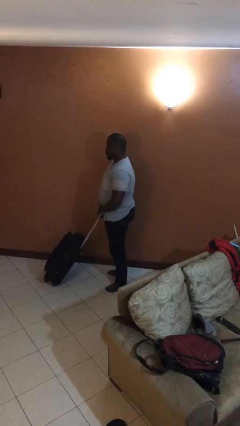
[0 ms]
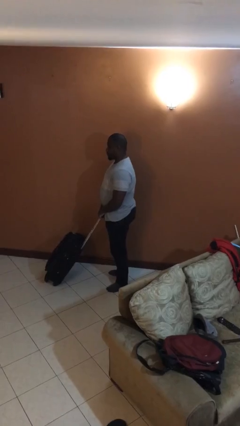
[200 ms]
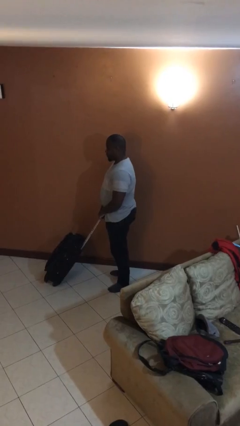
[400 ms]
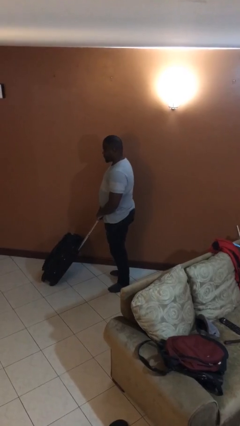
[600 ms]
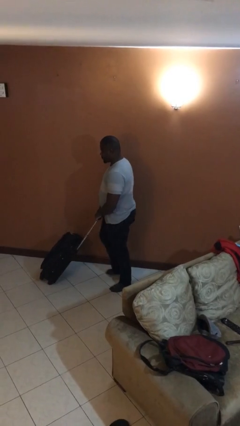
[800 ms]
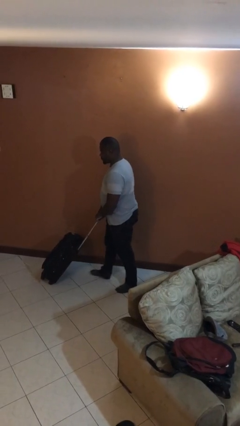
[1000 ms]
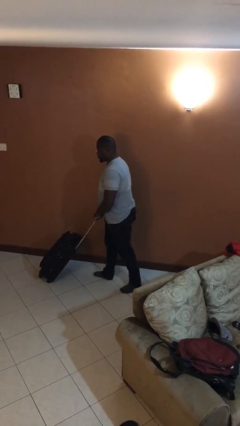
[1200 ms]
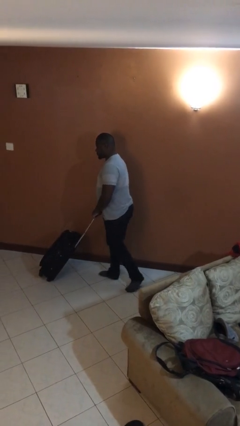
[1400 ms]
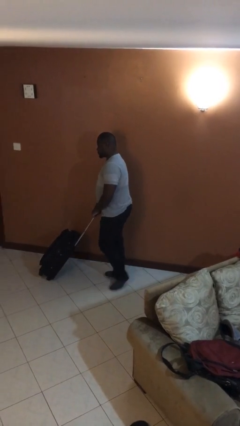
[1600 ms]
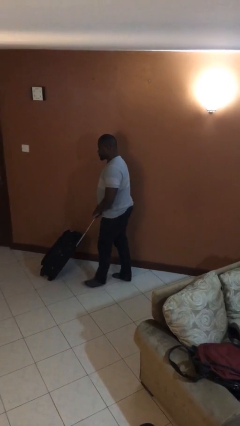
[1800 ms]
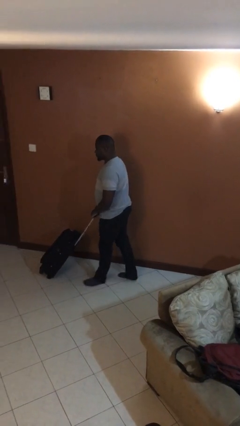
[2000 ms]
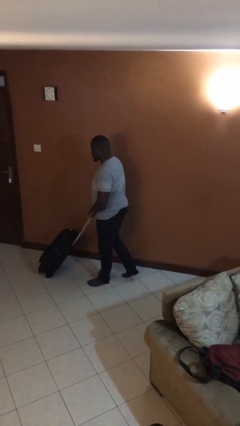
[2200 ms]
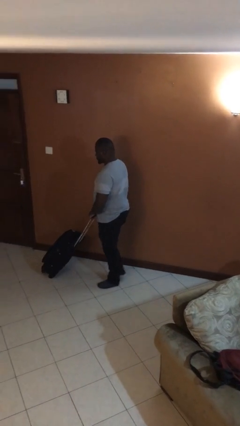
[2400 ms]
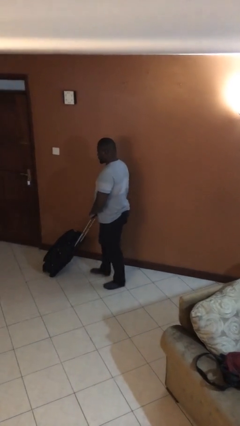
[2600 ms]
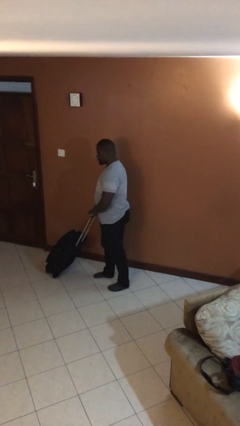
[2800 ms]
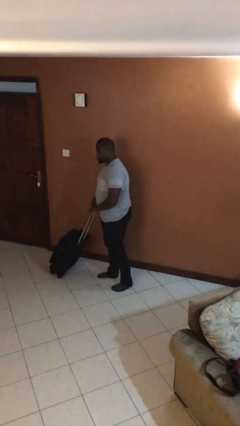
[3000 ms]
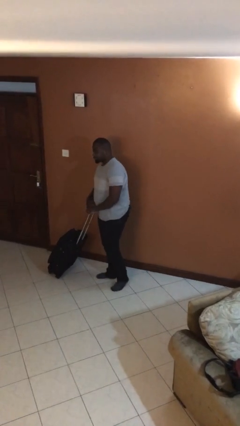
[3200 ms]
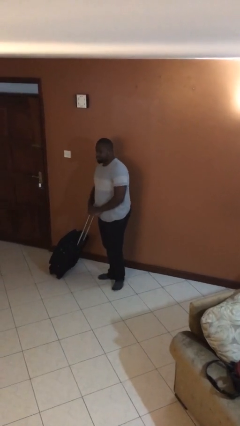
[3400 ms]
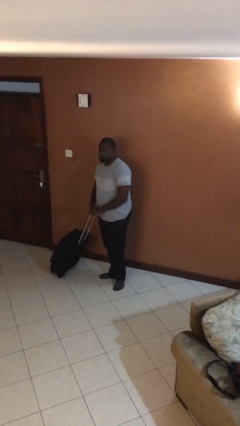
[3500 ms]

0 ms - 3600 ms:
person pushes wheeled cart

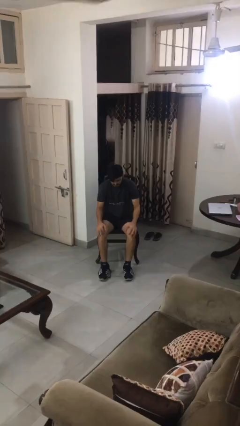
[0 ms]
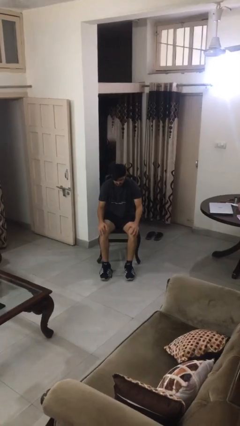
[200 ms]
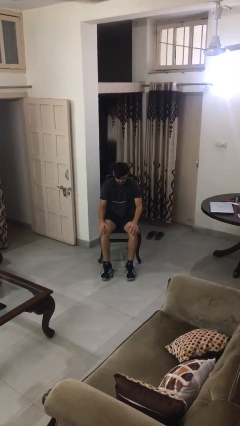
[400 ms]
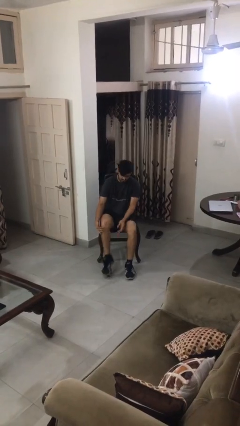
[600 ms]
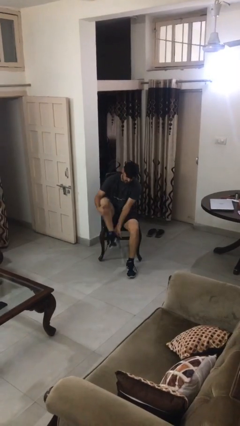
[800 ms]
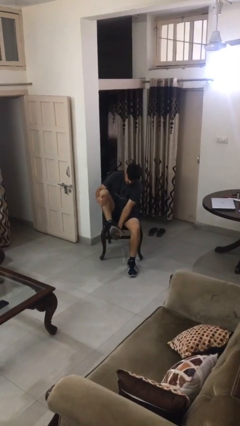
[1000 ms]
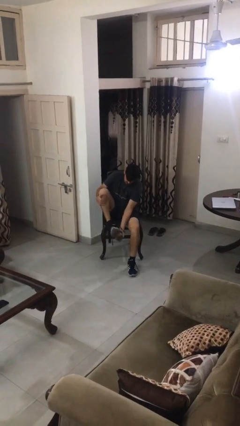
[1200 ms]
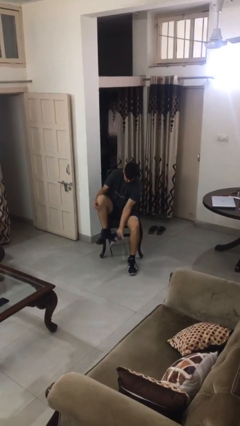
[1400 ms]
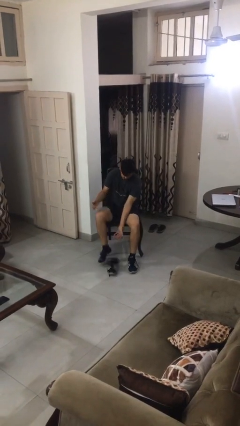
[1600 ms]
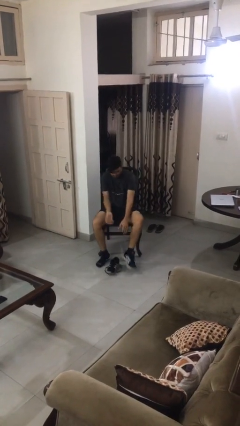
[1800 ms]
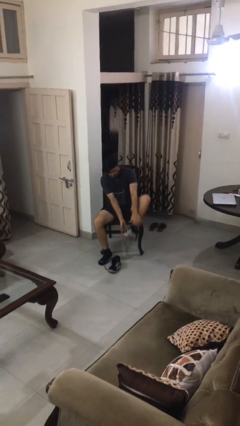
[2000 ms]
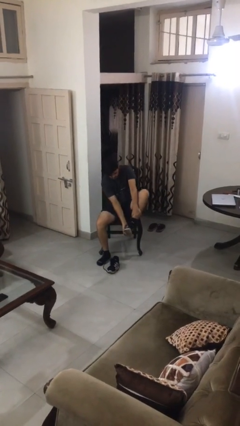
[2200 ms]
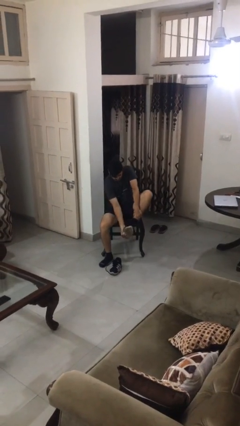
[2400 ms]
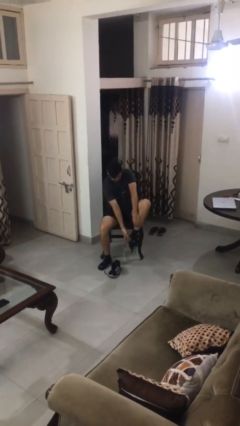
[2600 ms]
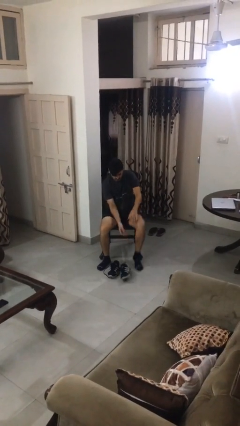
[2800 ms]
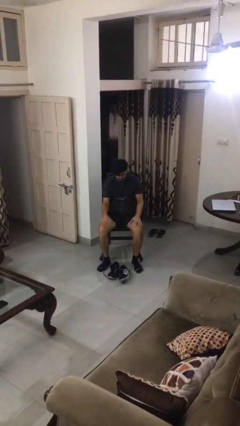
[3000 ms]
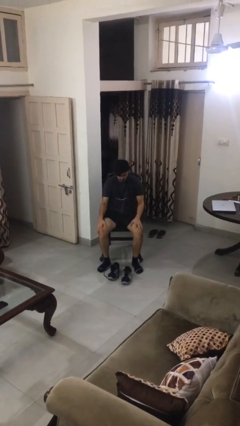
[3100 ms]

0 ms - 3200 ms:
person takes off shoes

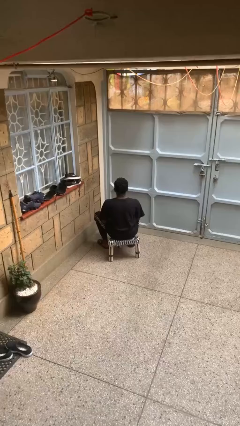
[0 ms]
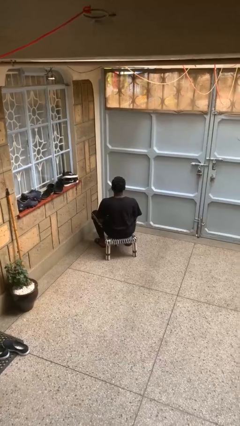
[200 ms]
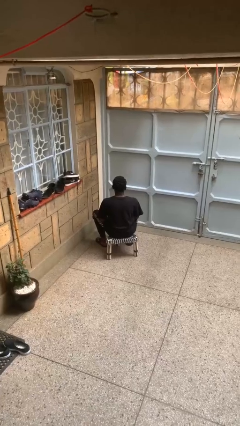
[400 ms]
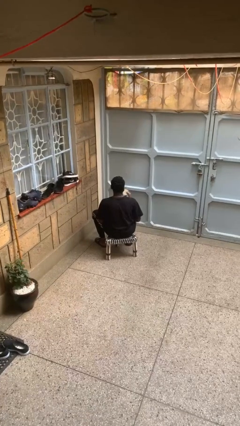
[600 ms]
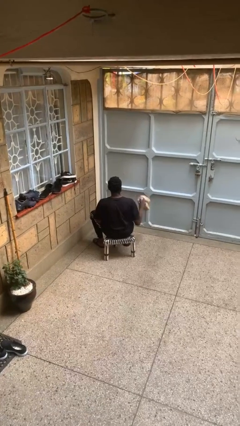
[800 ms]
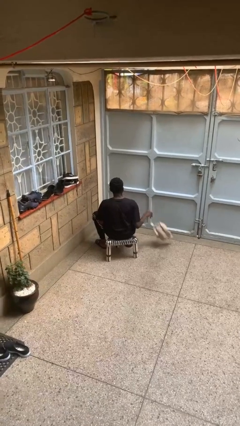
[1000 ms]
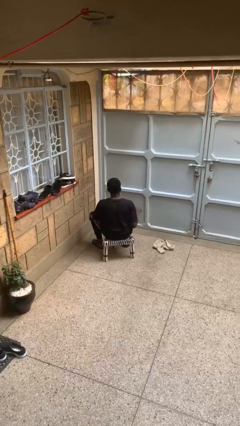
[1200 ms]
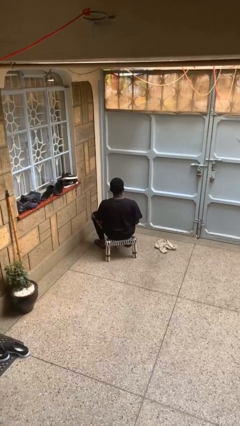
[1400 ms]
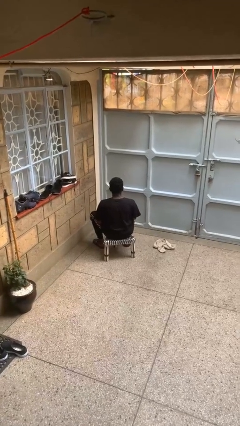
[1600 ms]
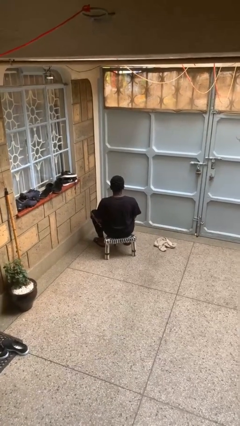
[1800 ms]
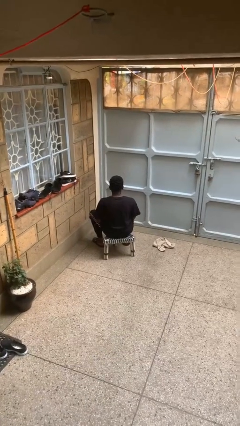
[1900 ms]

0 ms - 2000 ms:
person throws object to ground

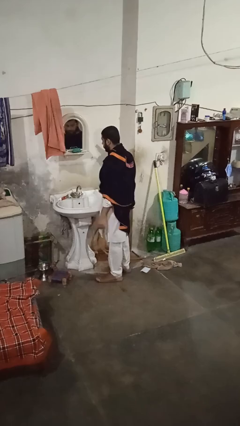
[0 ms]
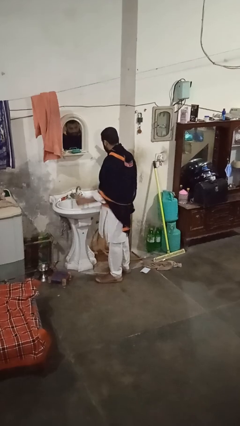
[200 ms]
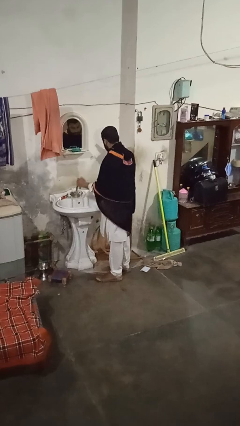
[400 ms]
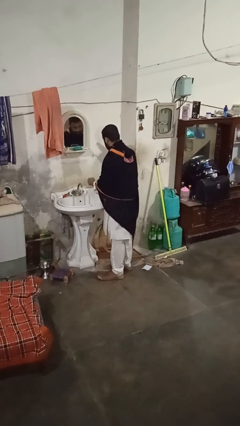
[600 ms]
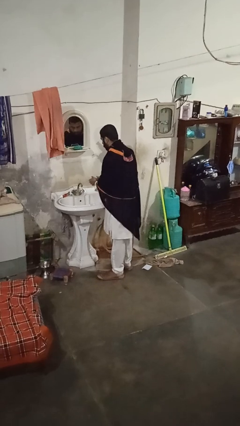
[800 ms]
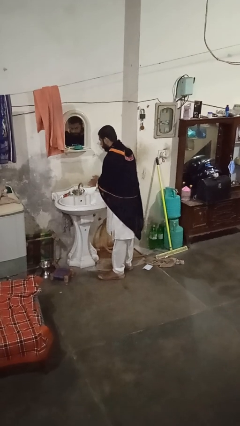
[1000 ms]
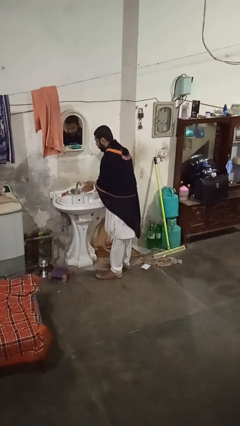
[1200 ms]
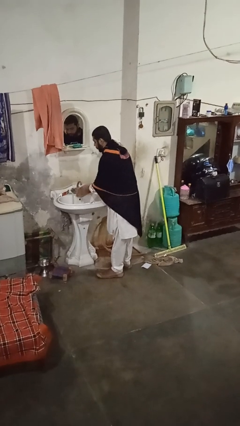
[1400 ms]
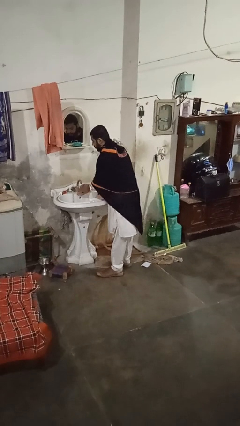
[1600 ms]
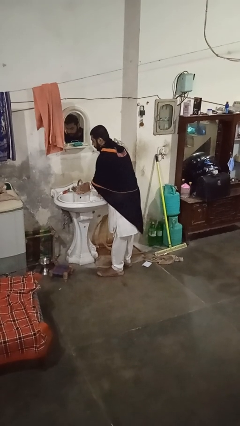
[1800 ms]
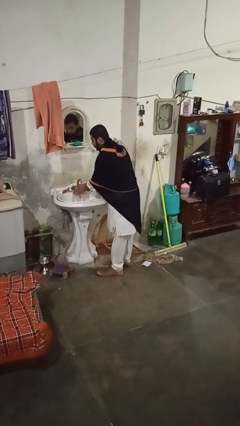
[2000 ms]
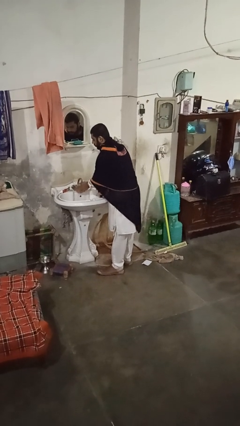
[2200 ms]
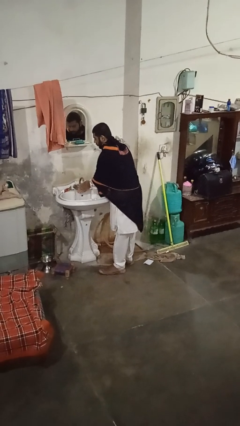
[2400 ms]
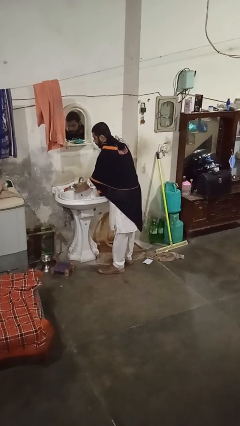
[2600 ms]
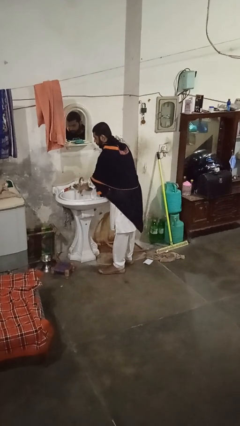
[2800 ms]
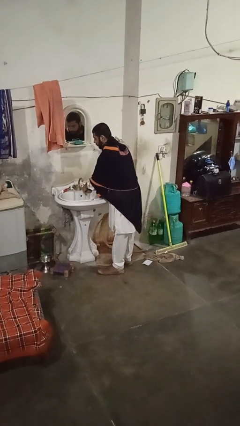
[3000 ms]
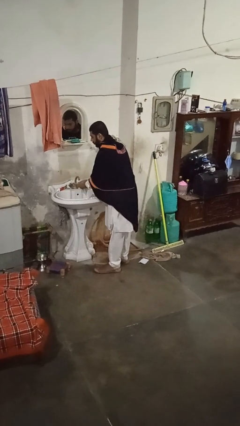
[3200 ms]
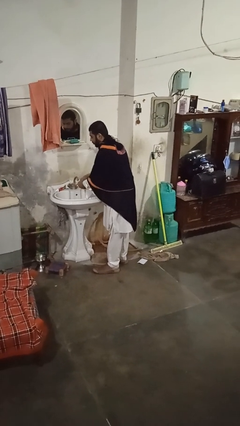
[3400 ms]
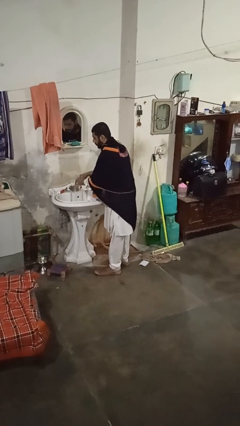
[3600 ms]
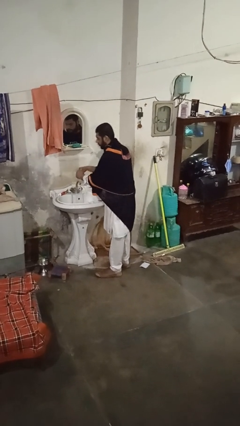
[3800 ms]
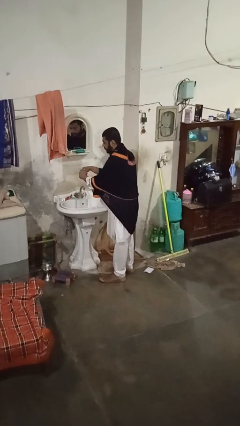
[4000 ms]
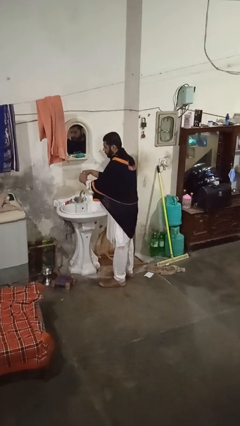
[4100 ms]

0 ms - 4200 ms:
person washes hands

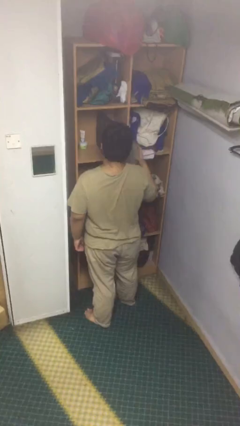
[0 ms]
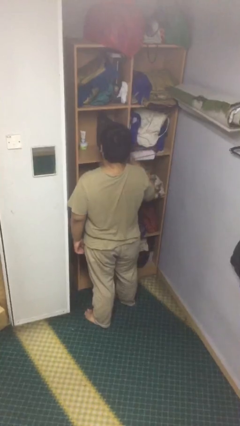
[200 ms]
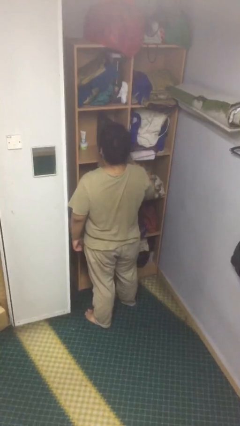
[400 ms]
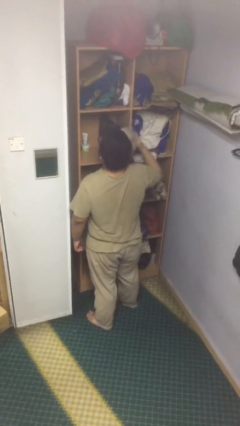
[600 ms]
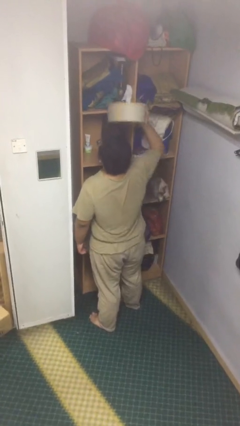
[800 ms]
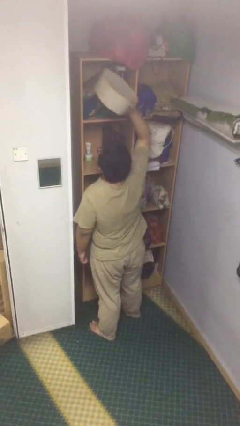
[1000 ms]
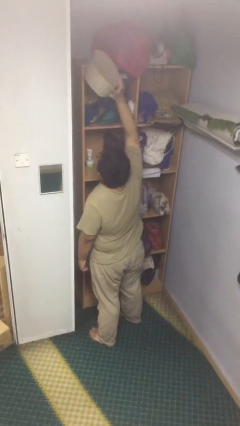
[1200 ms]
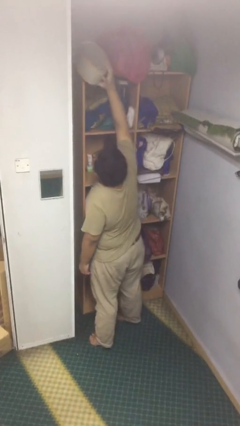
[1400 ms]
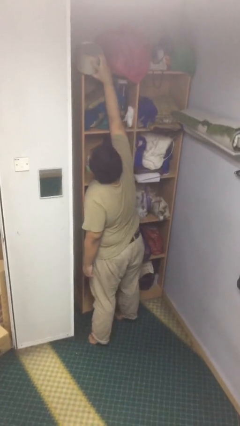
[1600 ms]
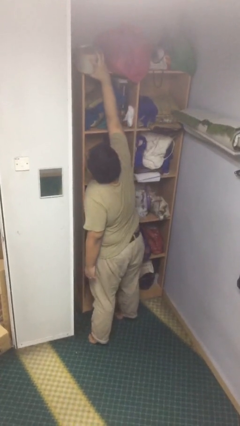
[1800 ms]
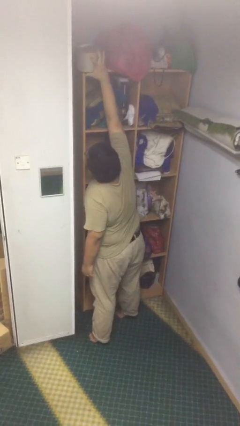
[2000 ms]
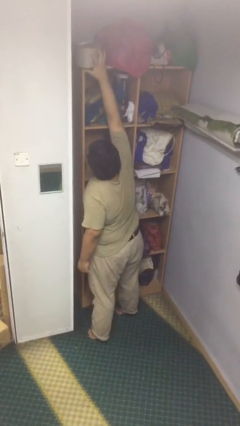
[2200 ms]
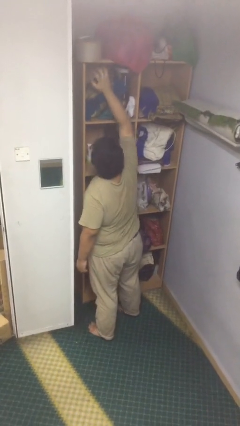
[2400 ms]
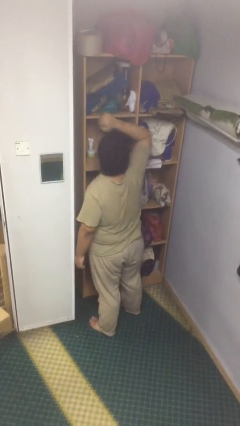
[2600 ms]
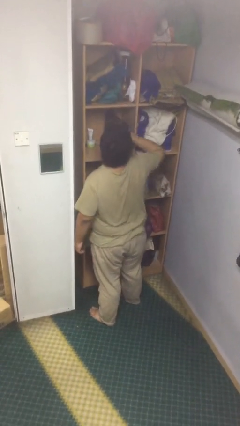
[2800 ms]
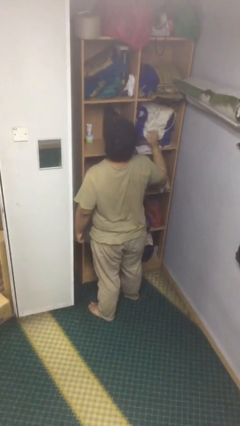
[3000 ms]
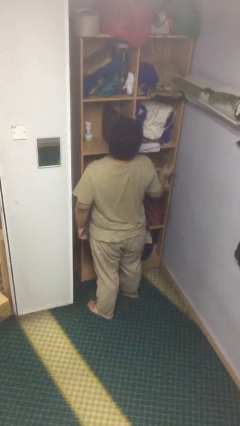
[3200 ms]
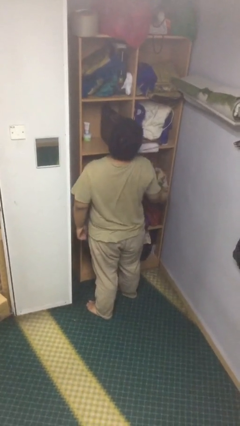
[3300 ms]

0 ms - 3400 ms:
person puts down object on shelf

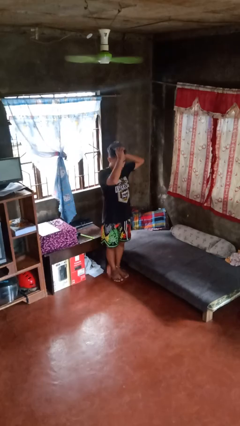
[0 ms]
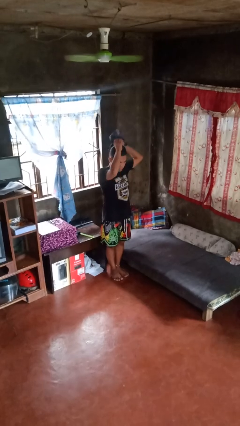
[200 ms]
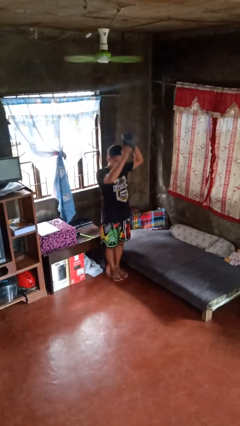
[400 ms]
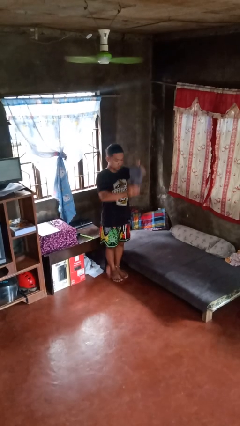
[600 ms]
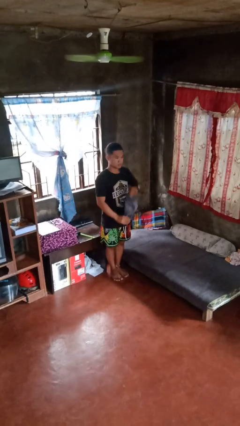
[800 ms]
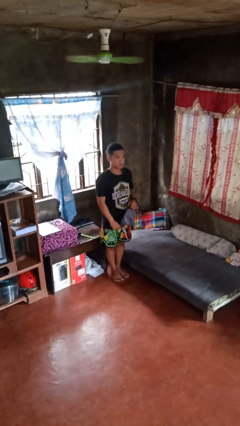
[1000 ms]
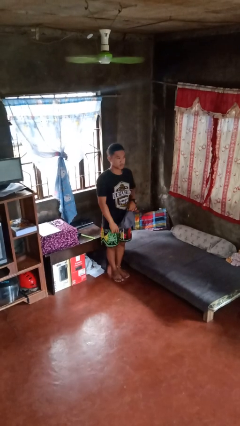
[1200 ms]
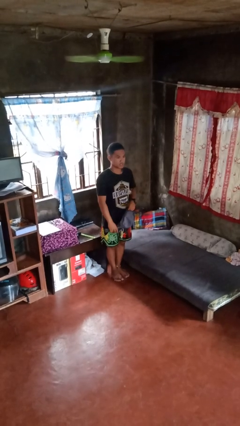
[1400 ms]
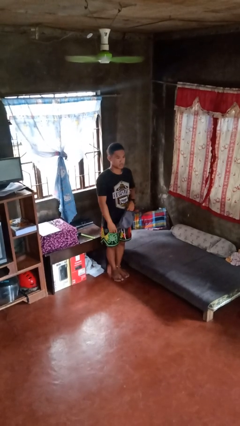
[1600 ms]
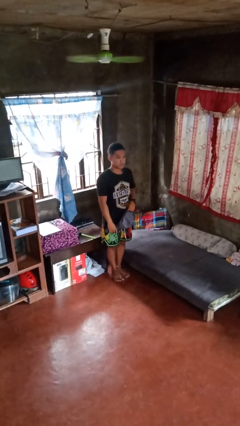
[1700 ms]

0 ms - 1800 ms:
person takes off hat
